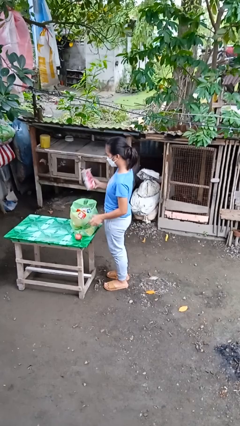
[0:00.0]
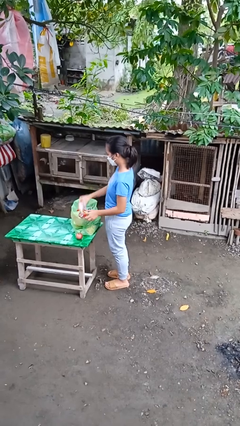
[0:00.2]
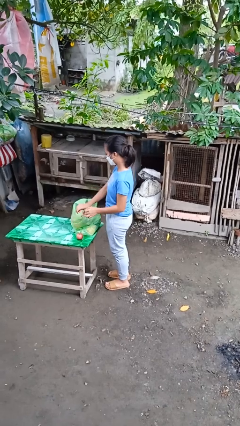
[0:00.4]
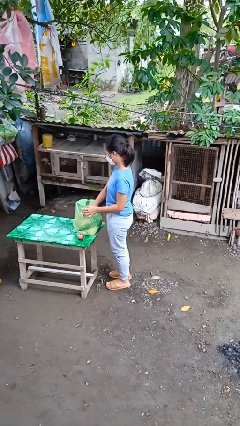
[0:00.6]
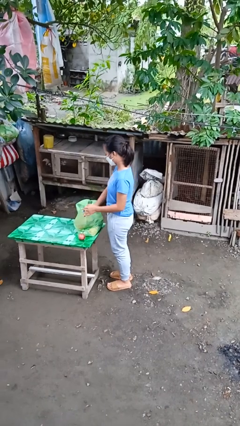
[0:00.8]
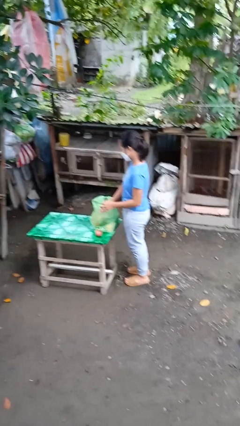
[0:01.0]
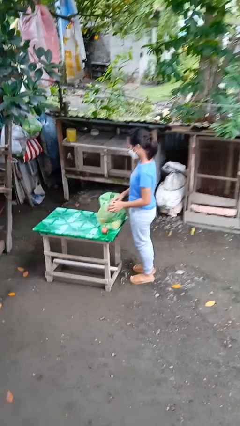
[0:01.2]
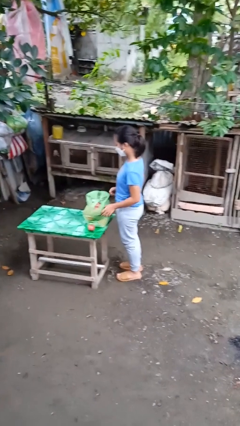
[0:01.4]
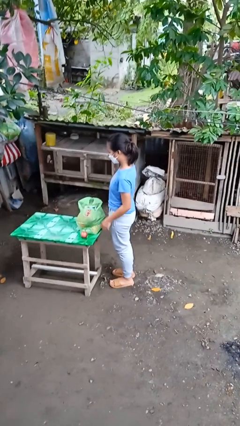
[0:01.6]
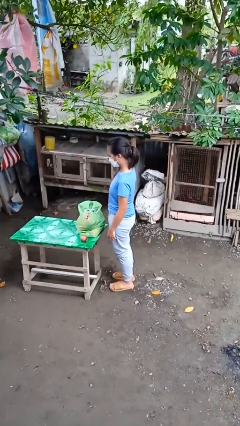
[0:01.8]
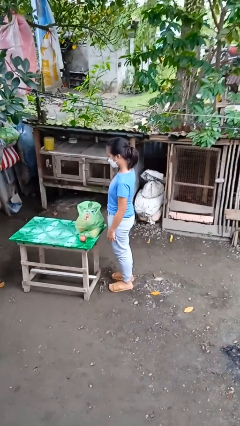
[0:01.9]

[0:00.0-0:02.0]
person puts object into bag

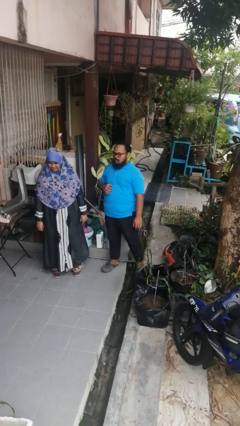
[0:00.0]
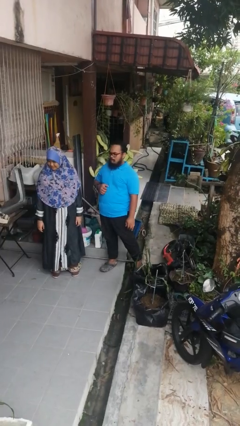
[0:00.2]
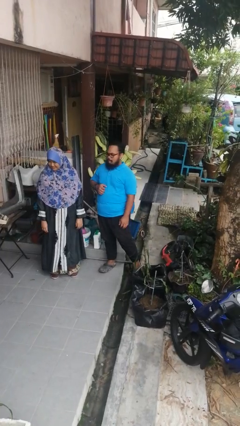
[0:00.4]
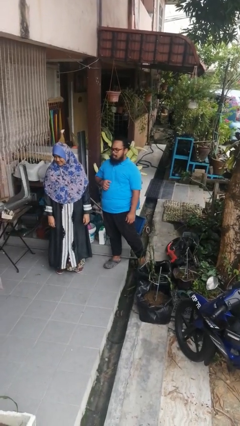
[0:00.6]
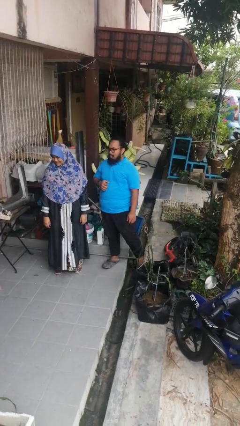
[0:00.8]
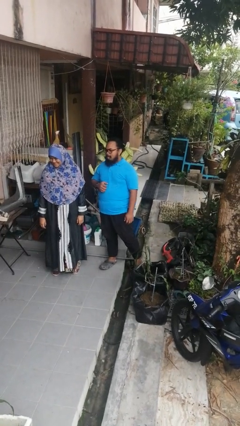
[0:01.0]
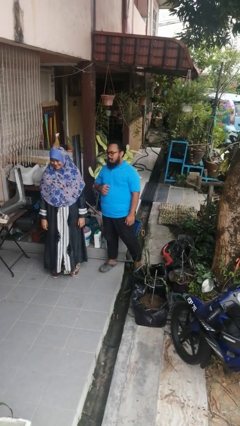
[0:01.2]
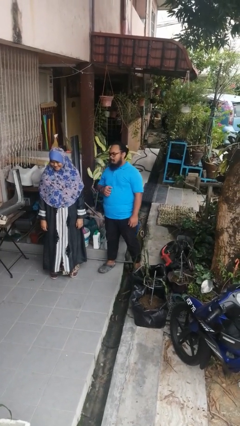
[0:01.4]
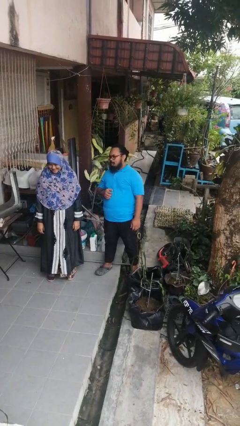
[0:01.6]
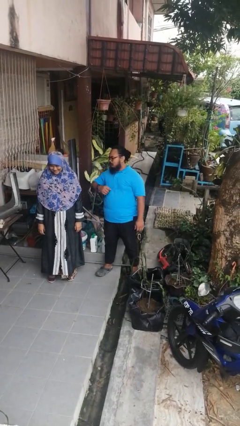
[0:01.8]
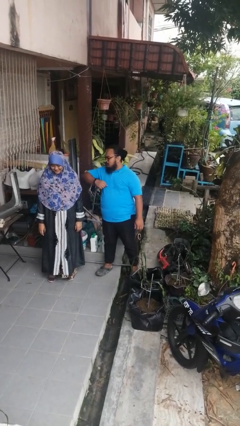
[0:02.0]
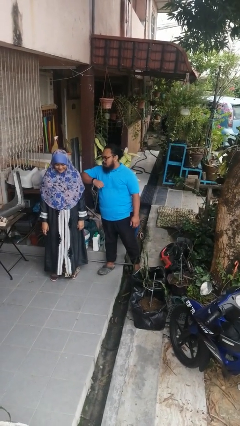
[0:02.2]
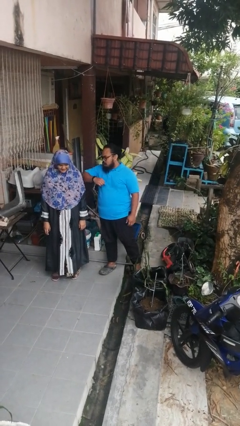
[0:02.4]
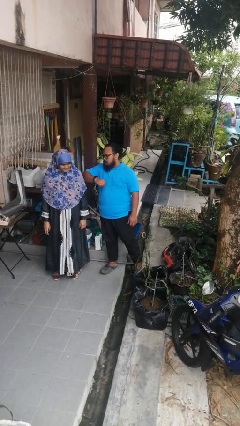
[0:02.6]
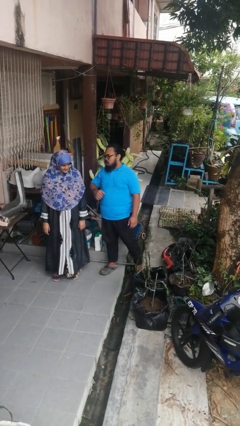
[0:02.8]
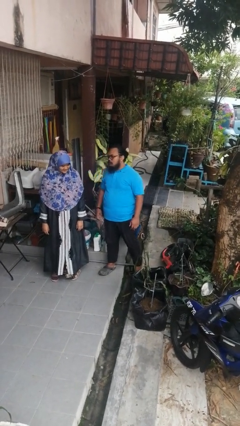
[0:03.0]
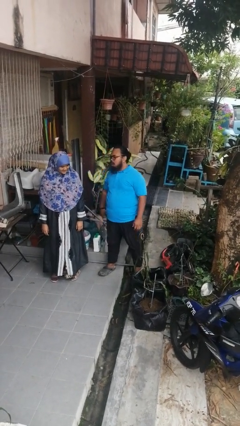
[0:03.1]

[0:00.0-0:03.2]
person nudges person with elbow

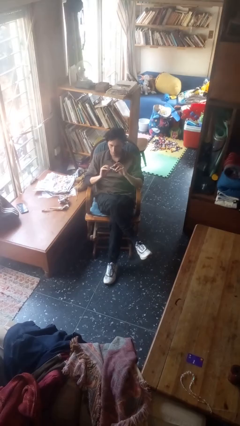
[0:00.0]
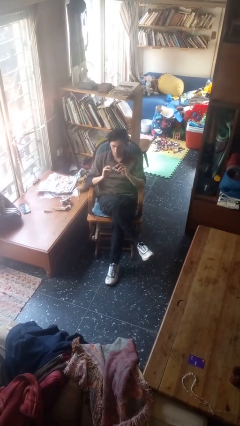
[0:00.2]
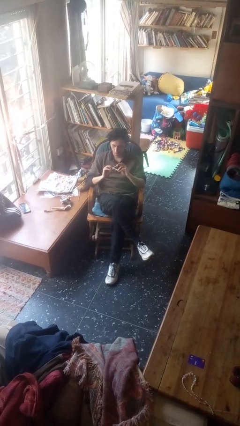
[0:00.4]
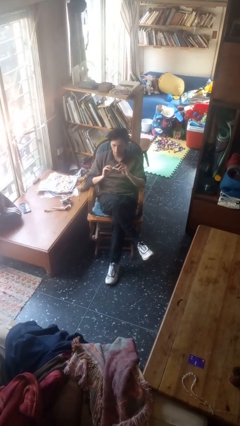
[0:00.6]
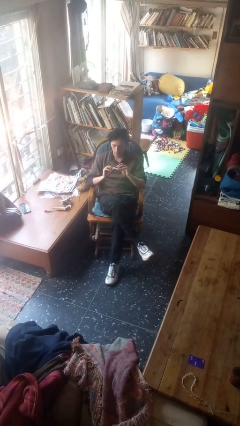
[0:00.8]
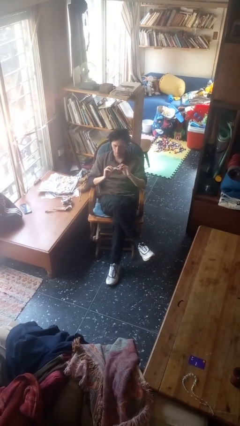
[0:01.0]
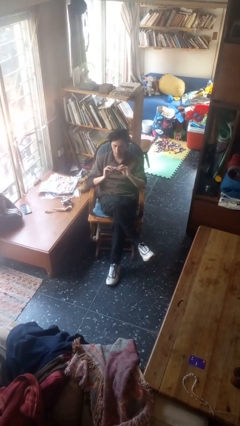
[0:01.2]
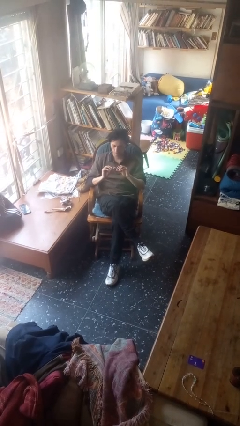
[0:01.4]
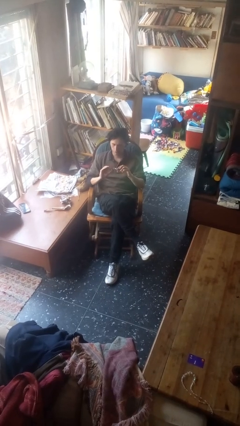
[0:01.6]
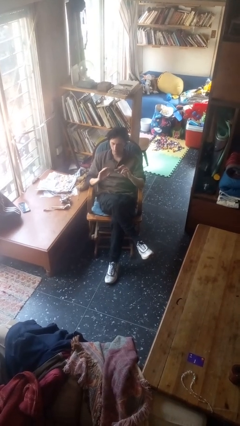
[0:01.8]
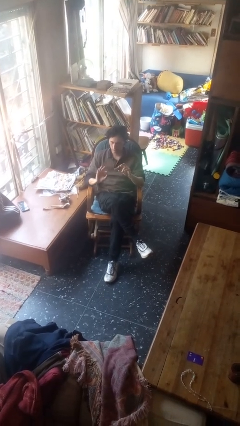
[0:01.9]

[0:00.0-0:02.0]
person clips fingernails

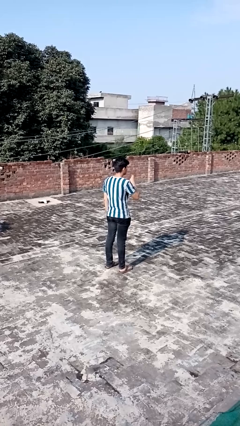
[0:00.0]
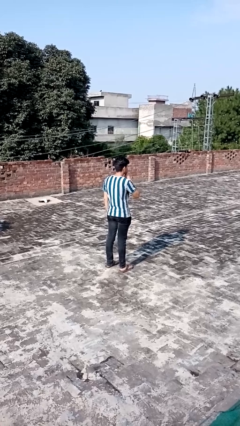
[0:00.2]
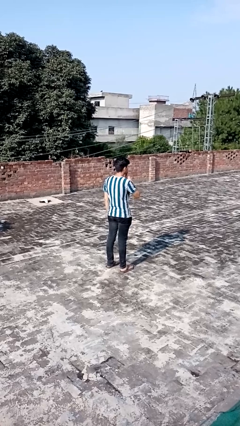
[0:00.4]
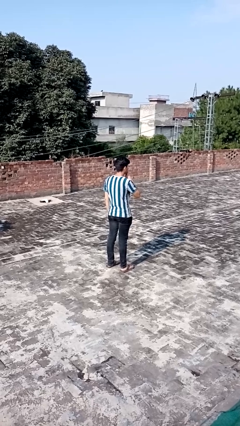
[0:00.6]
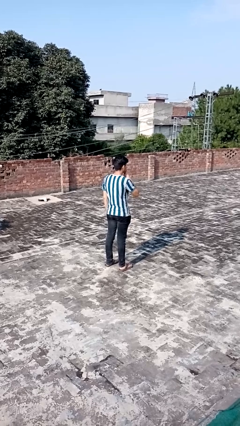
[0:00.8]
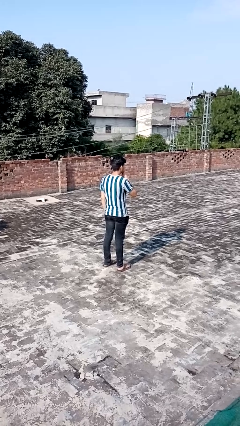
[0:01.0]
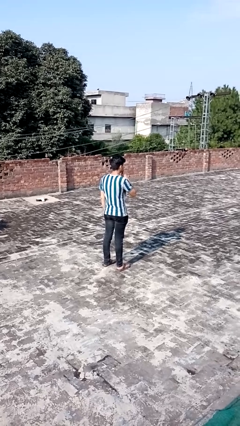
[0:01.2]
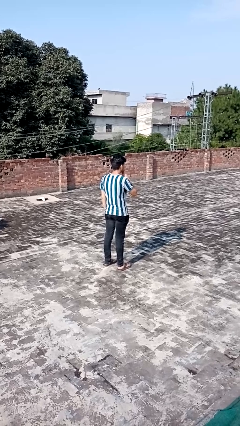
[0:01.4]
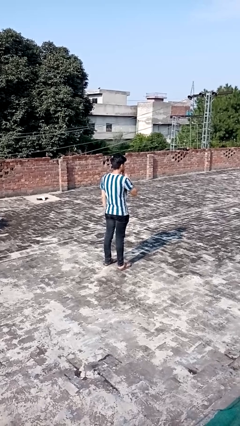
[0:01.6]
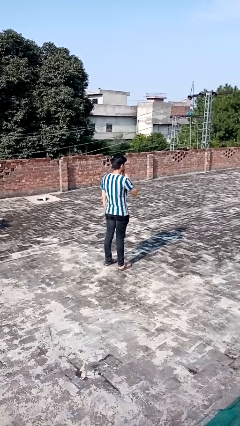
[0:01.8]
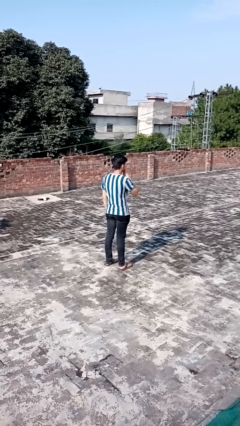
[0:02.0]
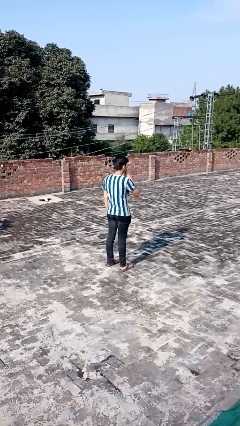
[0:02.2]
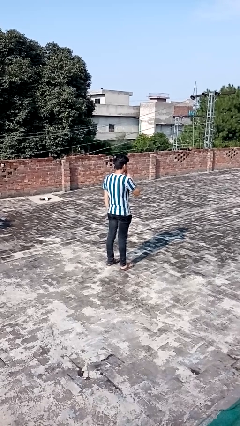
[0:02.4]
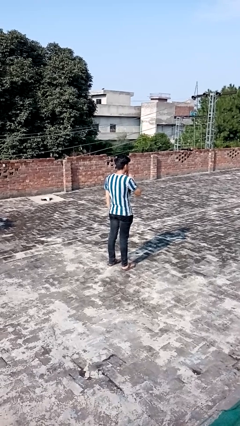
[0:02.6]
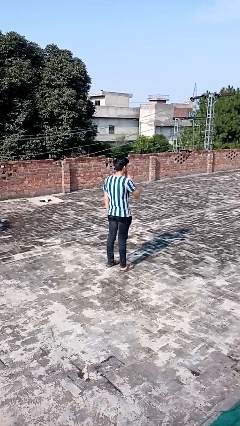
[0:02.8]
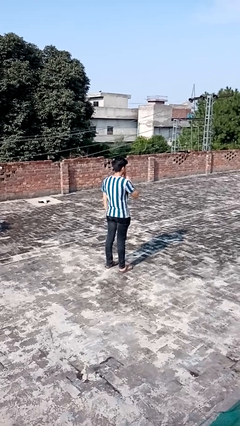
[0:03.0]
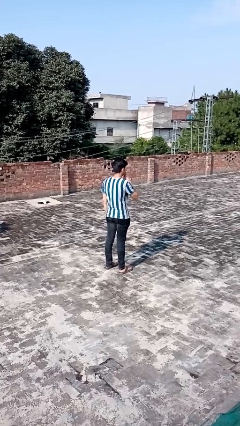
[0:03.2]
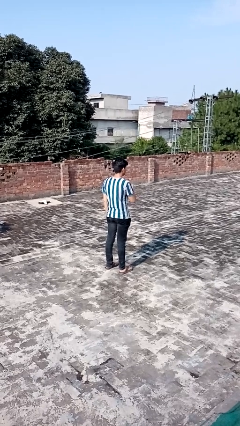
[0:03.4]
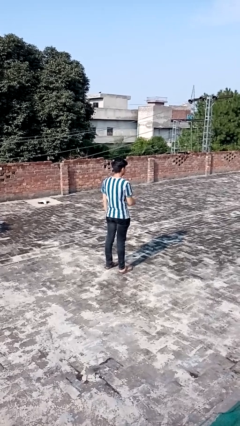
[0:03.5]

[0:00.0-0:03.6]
person gestures be quiet

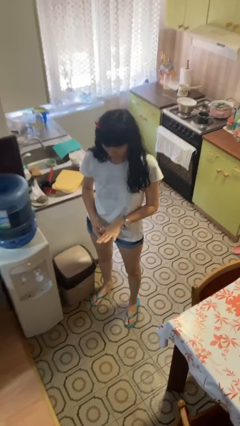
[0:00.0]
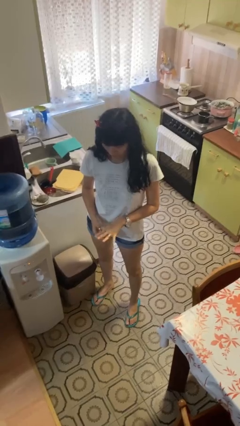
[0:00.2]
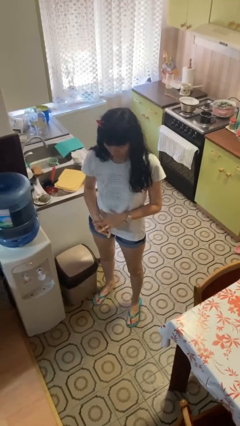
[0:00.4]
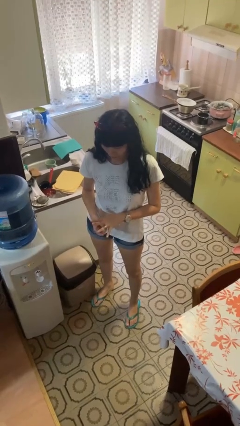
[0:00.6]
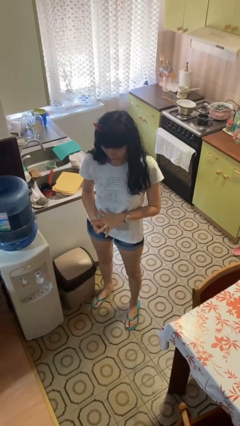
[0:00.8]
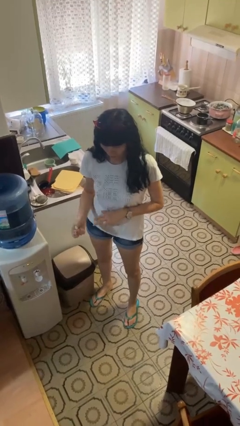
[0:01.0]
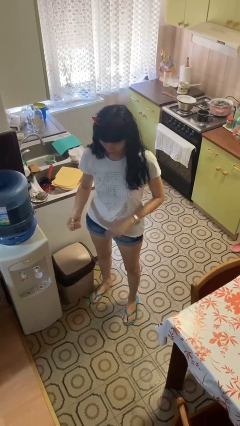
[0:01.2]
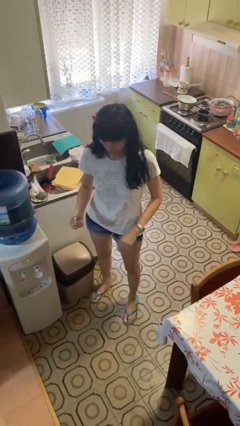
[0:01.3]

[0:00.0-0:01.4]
person takes off ring

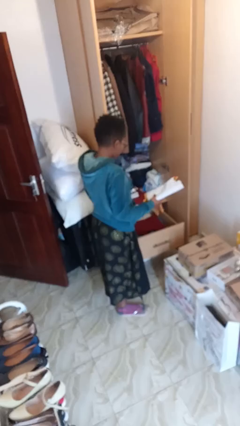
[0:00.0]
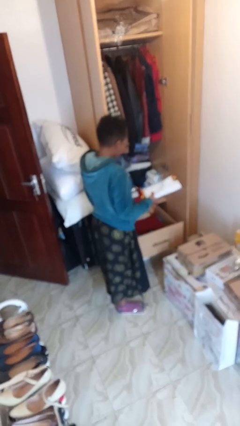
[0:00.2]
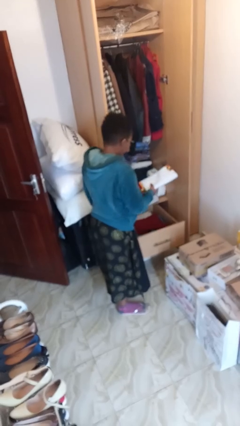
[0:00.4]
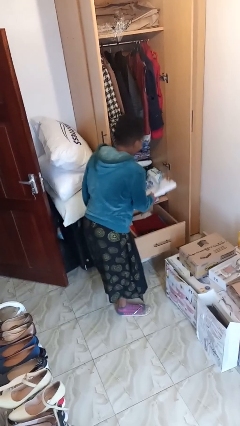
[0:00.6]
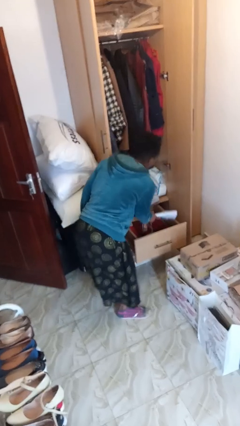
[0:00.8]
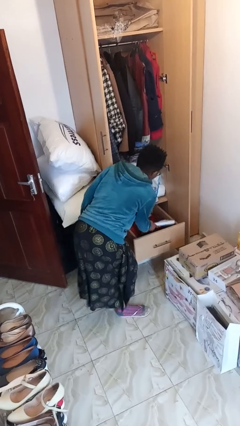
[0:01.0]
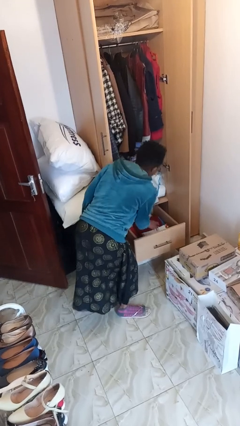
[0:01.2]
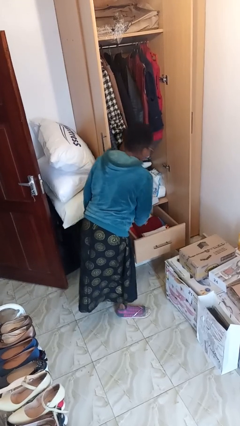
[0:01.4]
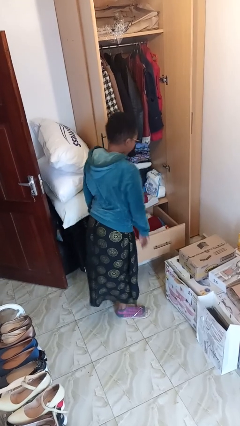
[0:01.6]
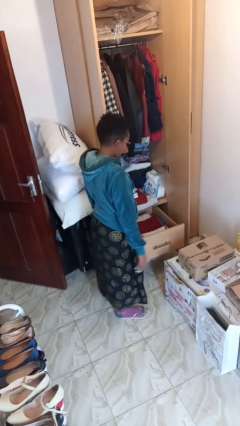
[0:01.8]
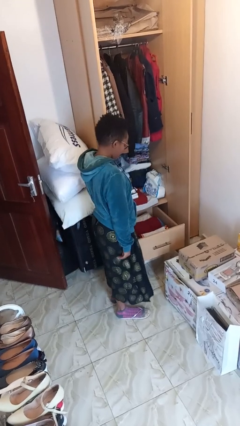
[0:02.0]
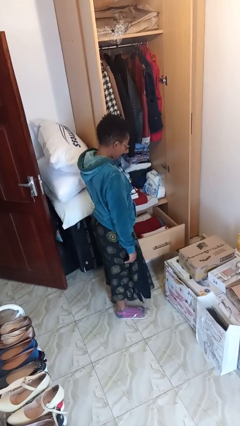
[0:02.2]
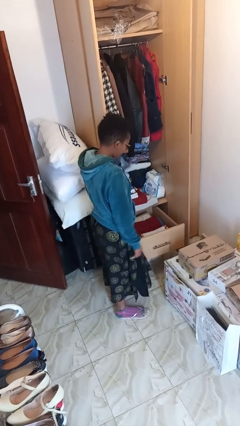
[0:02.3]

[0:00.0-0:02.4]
person puts clothes into dresser

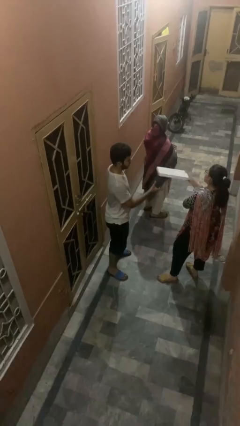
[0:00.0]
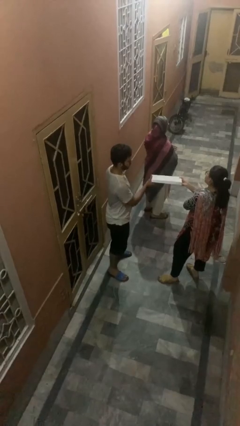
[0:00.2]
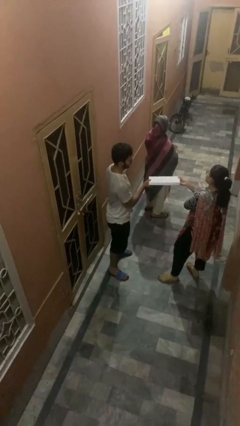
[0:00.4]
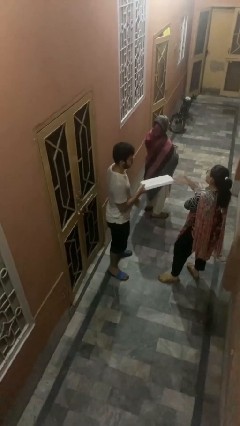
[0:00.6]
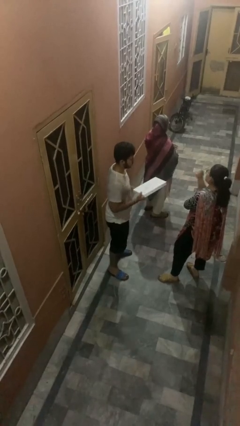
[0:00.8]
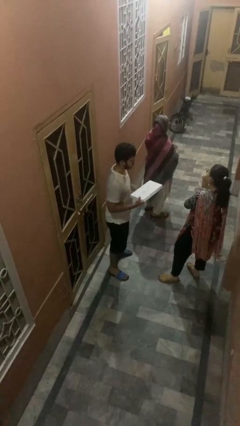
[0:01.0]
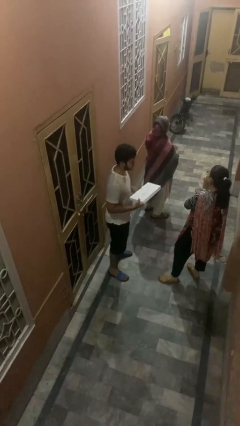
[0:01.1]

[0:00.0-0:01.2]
person transfers object to person

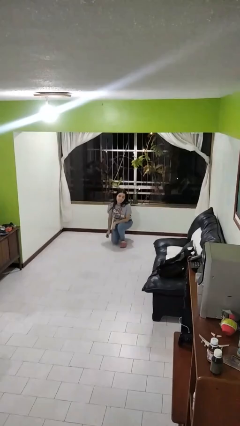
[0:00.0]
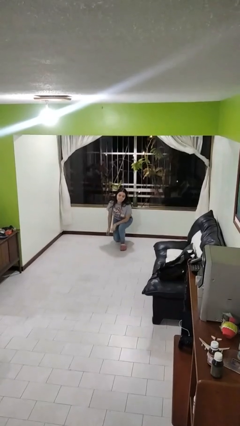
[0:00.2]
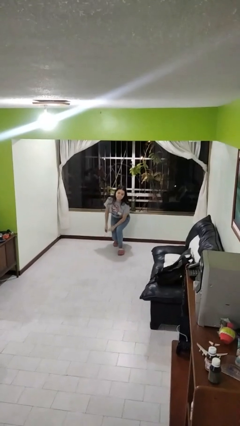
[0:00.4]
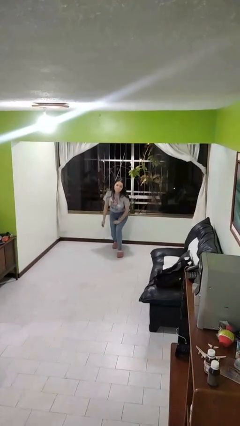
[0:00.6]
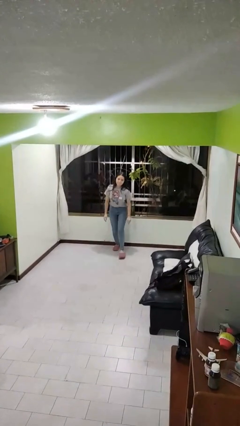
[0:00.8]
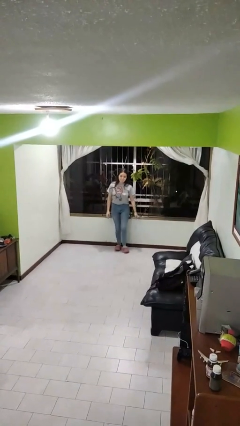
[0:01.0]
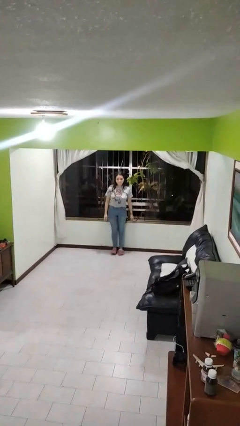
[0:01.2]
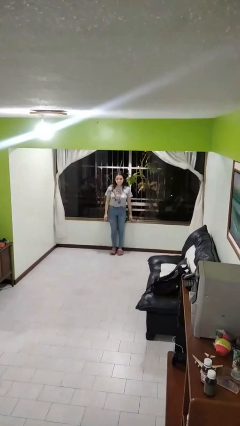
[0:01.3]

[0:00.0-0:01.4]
person stands up from floor
